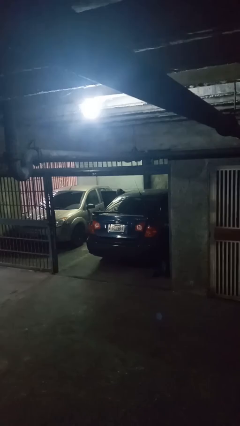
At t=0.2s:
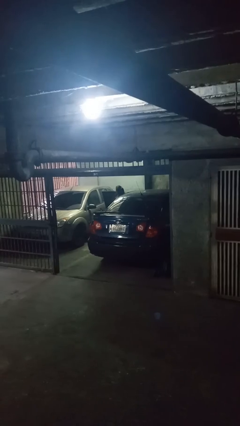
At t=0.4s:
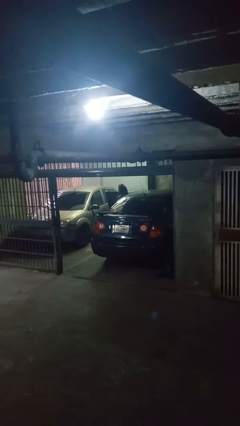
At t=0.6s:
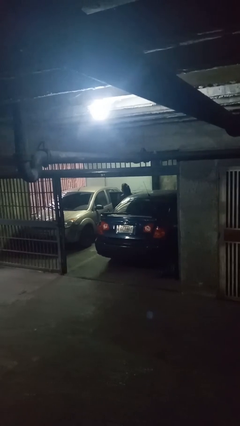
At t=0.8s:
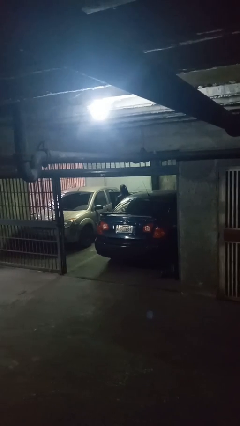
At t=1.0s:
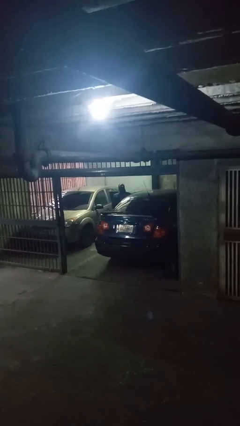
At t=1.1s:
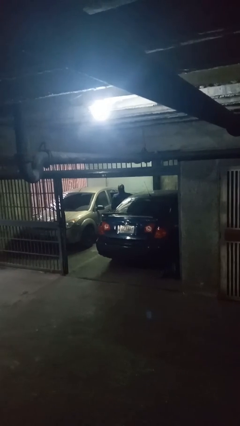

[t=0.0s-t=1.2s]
person exits car

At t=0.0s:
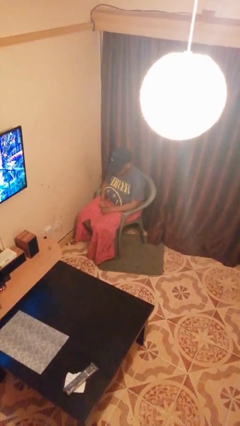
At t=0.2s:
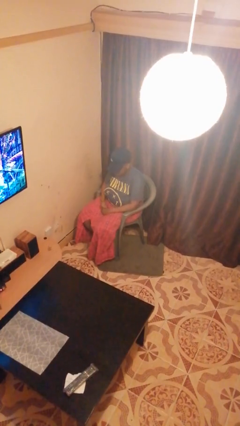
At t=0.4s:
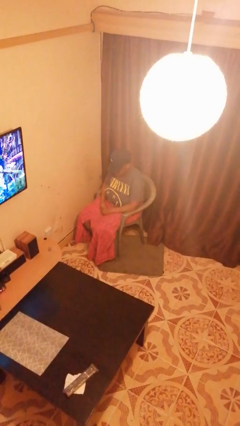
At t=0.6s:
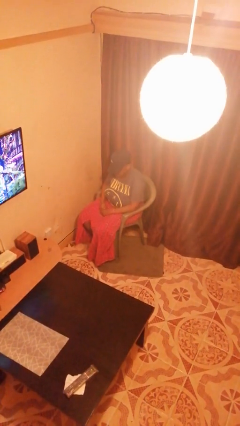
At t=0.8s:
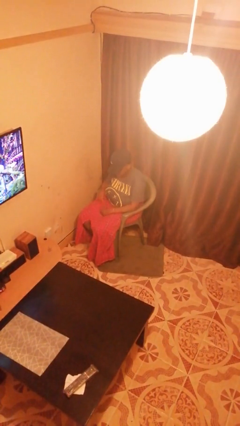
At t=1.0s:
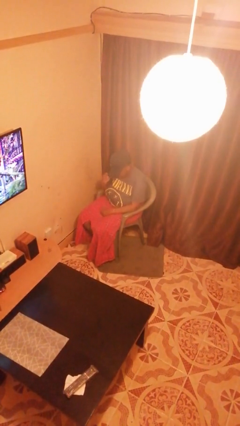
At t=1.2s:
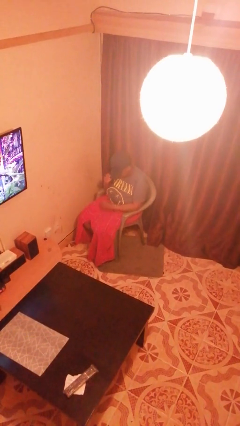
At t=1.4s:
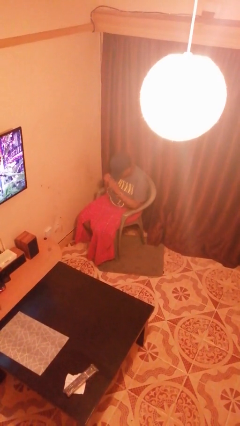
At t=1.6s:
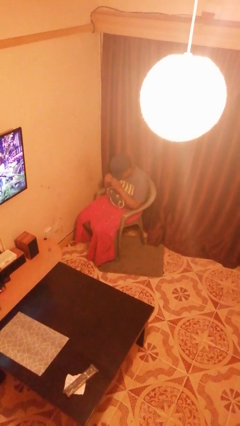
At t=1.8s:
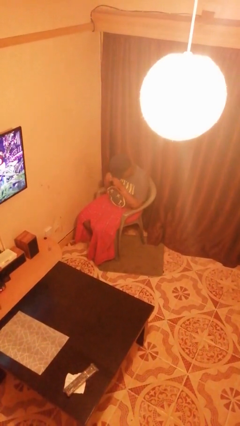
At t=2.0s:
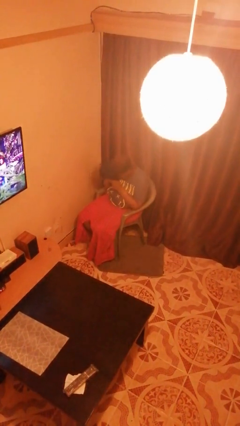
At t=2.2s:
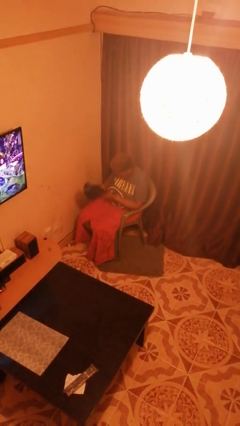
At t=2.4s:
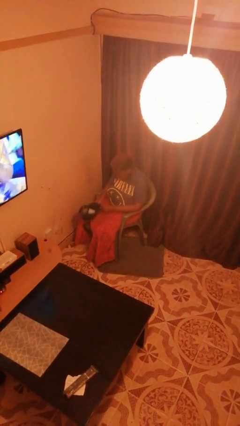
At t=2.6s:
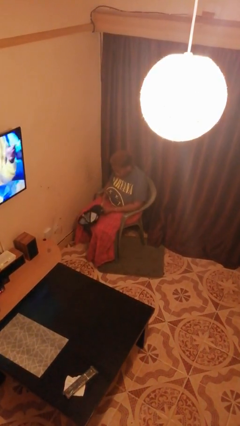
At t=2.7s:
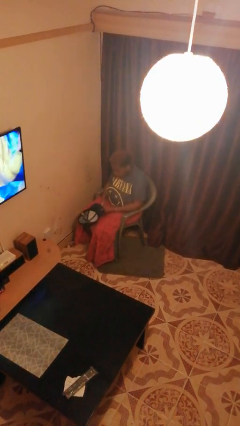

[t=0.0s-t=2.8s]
person takes off hat

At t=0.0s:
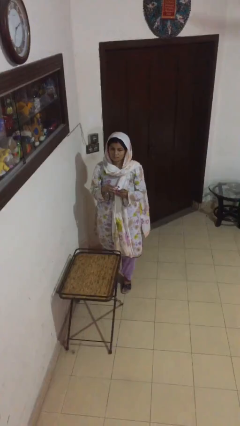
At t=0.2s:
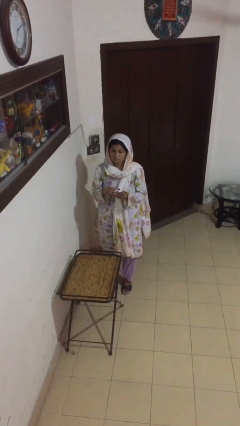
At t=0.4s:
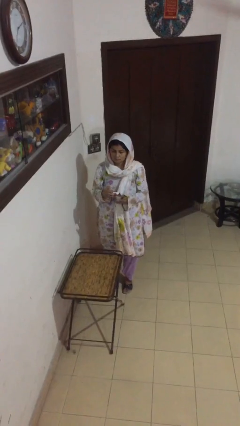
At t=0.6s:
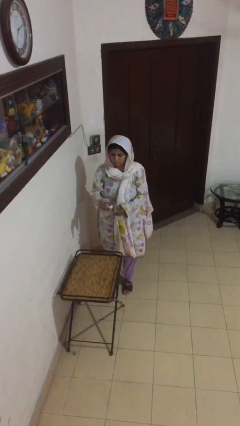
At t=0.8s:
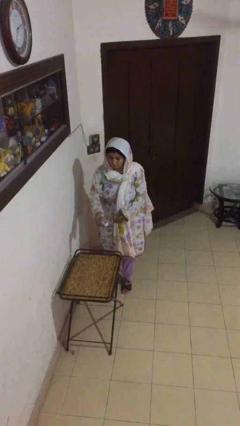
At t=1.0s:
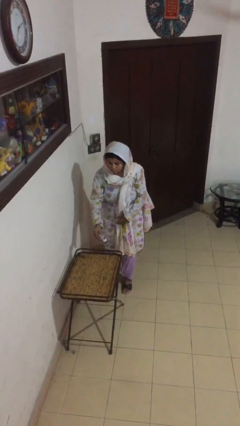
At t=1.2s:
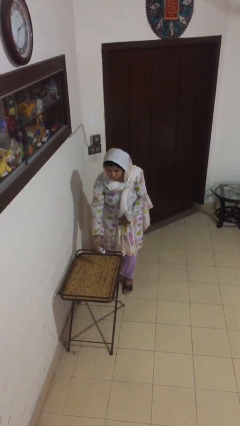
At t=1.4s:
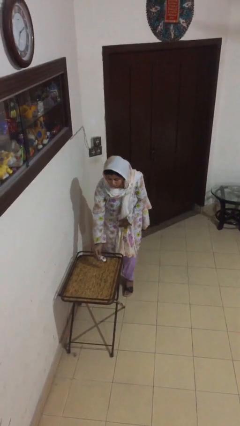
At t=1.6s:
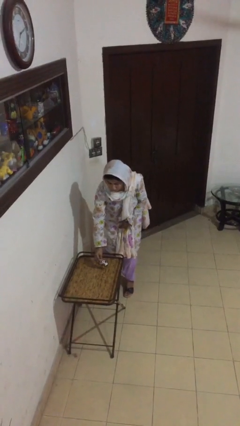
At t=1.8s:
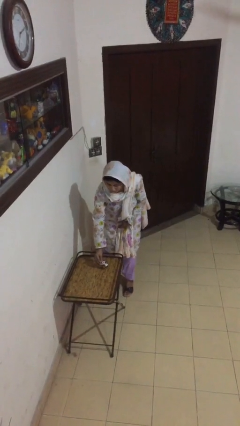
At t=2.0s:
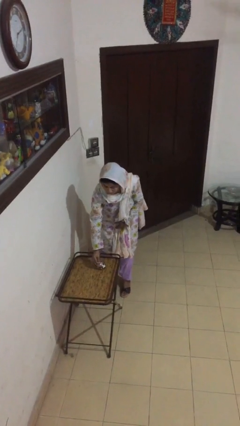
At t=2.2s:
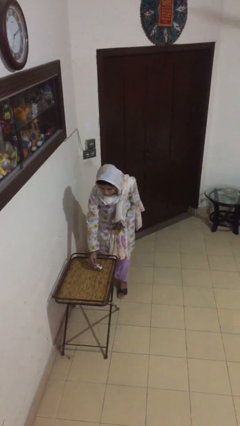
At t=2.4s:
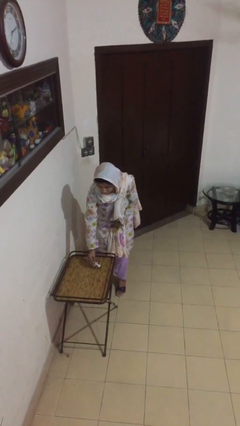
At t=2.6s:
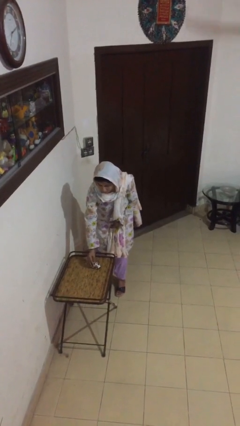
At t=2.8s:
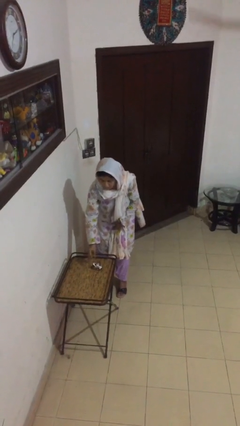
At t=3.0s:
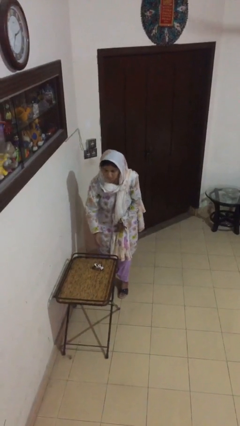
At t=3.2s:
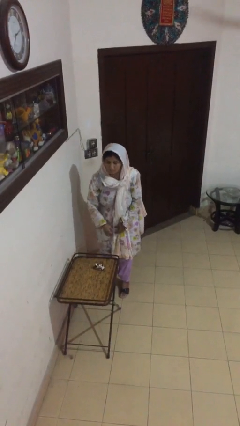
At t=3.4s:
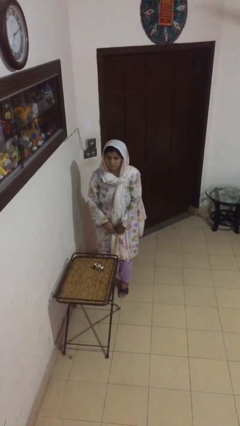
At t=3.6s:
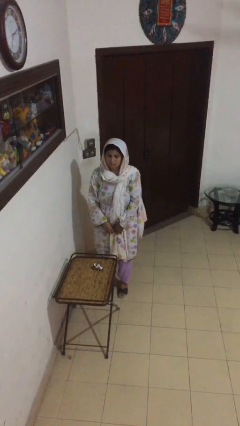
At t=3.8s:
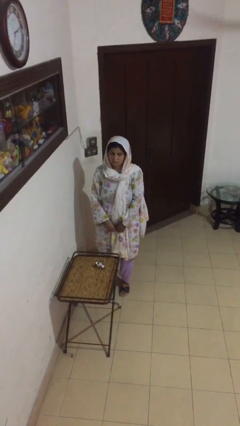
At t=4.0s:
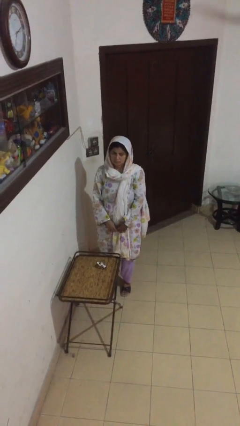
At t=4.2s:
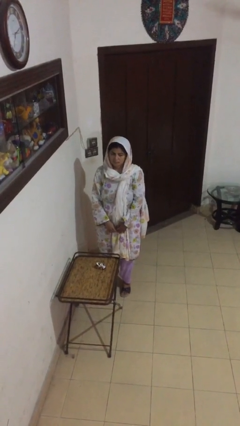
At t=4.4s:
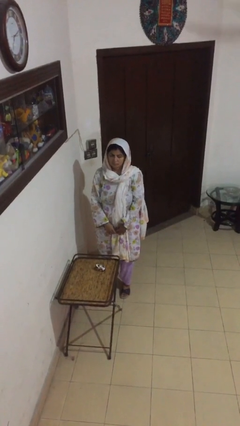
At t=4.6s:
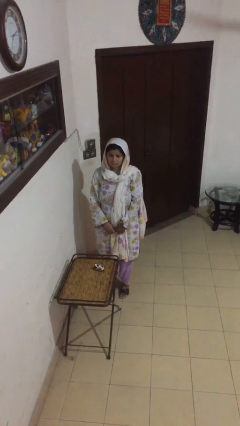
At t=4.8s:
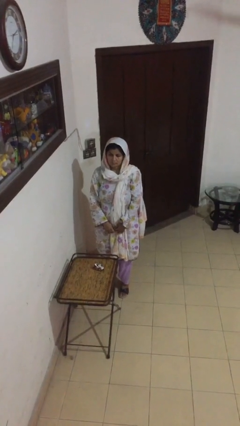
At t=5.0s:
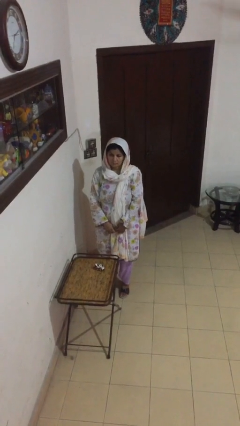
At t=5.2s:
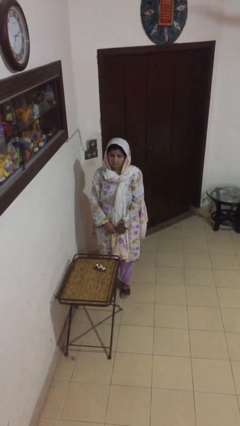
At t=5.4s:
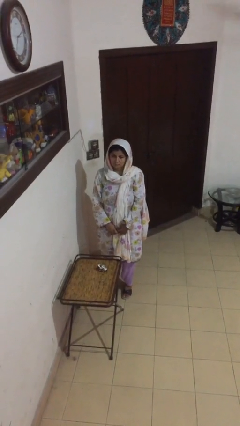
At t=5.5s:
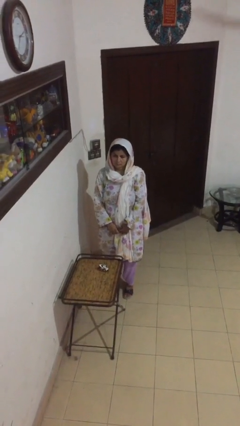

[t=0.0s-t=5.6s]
person puts down object on table

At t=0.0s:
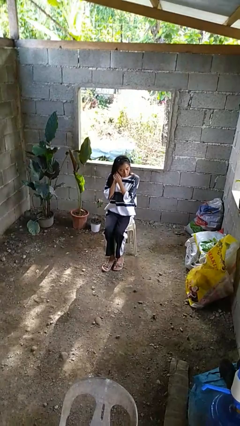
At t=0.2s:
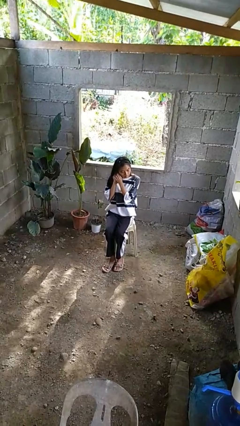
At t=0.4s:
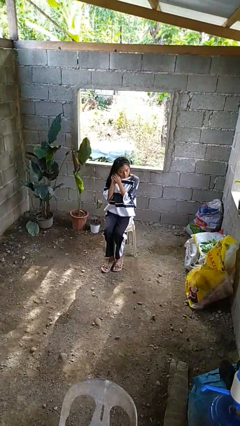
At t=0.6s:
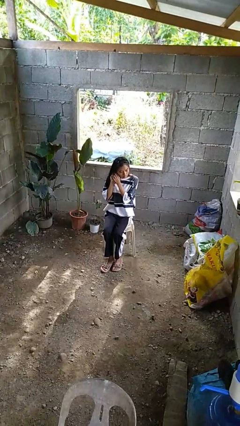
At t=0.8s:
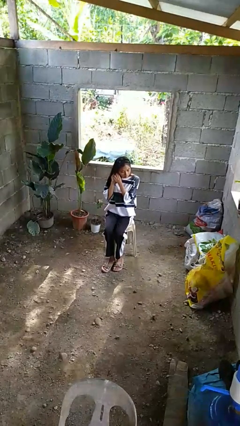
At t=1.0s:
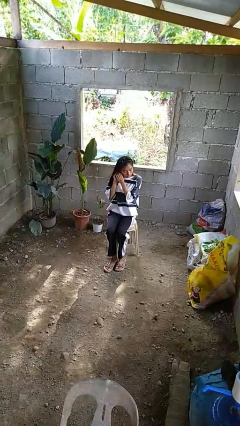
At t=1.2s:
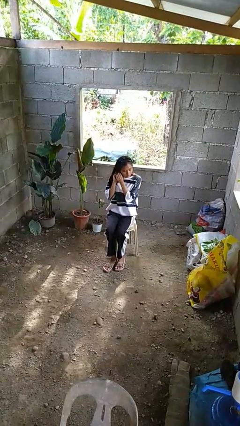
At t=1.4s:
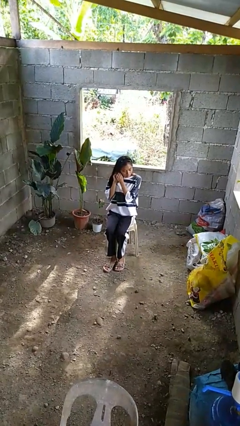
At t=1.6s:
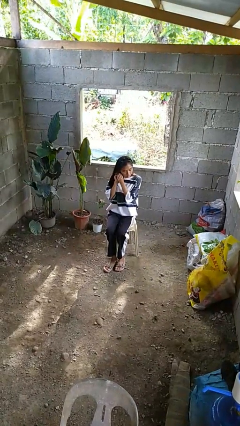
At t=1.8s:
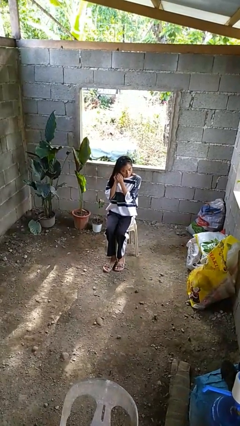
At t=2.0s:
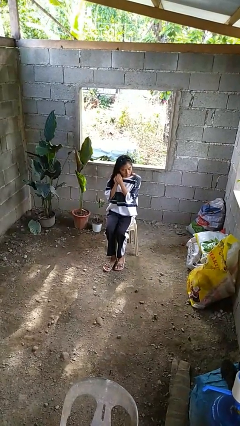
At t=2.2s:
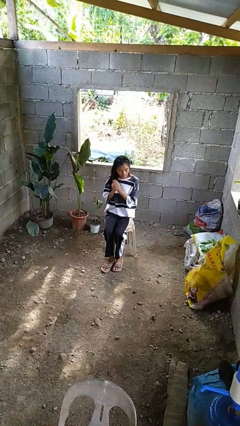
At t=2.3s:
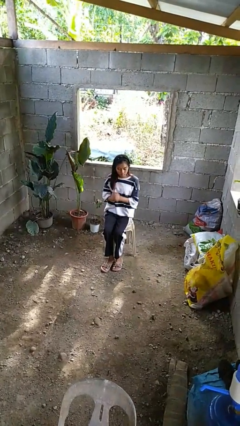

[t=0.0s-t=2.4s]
person puts on earrings

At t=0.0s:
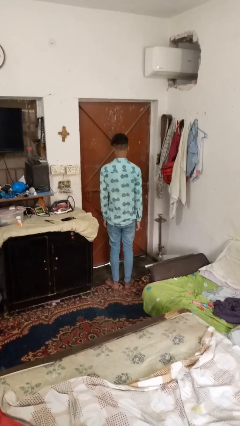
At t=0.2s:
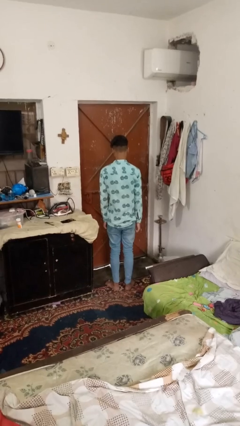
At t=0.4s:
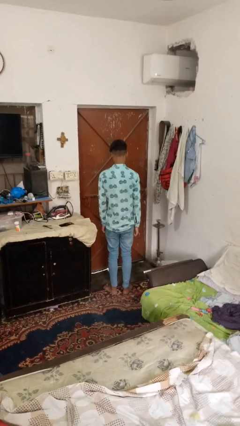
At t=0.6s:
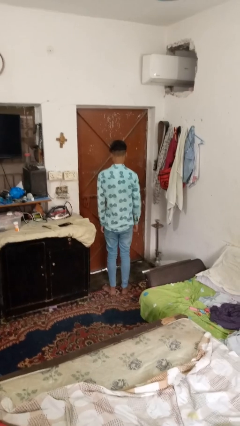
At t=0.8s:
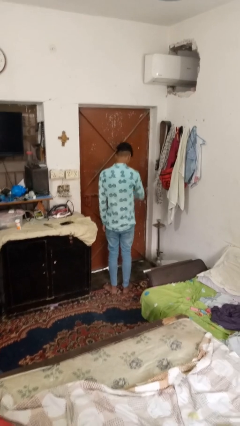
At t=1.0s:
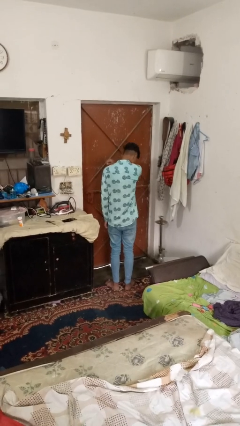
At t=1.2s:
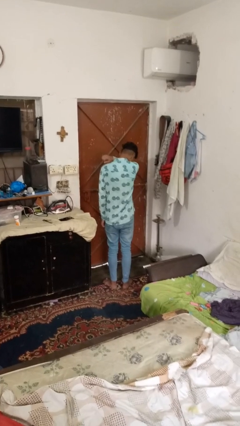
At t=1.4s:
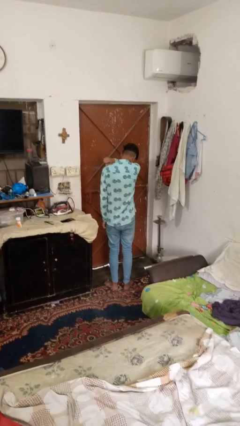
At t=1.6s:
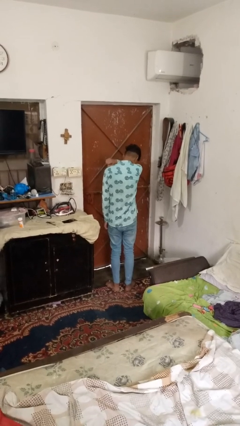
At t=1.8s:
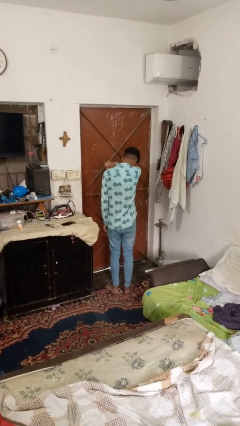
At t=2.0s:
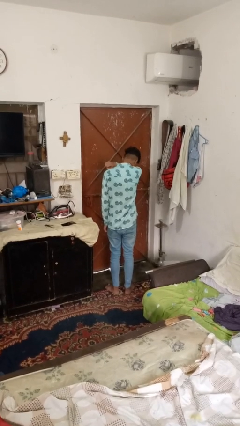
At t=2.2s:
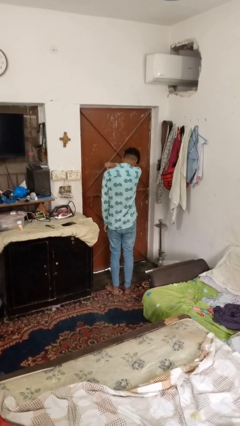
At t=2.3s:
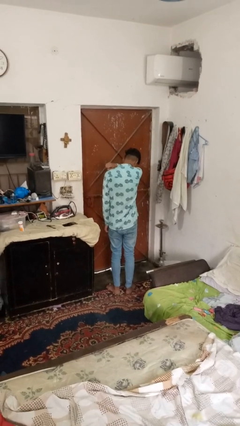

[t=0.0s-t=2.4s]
person sneezes into arm

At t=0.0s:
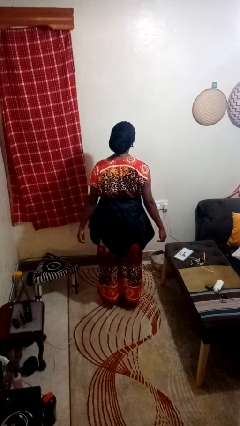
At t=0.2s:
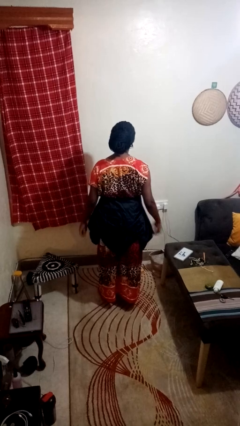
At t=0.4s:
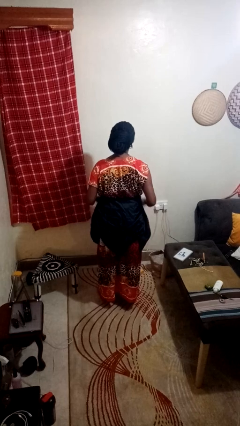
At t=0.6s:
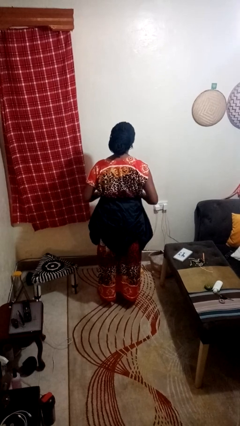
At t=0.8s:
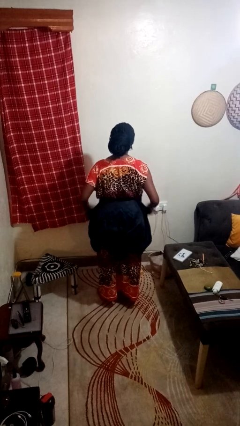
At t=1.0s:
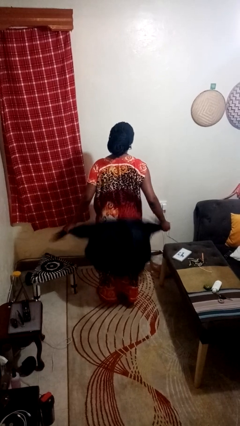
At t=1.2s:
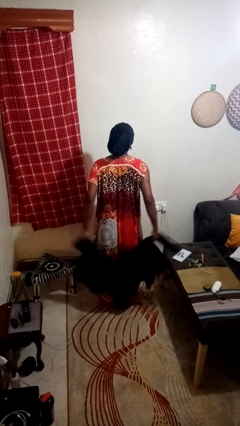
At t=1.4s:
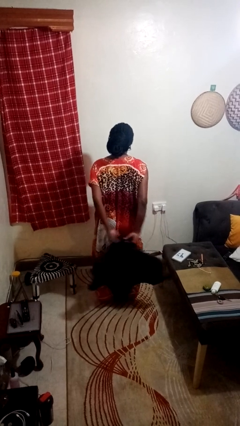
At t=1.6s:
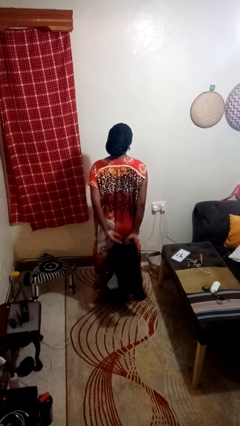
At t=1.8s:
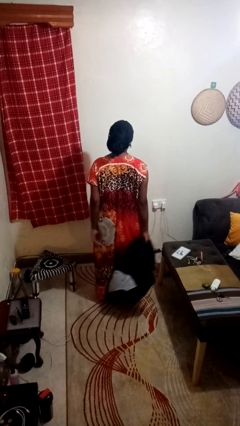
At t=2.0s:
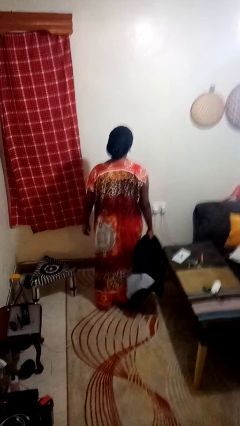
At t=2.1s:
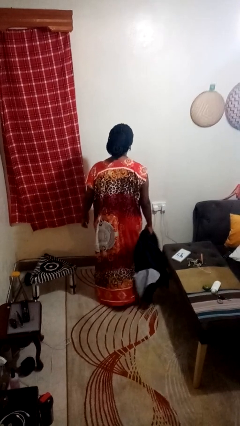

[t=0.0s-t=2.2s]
person unties jacket around waist

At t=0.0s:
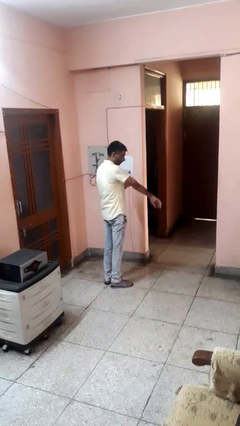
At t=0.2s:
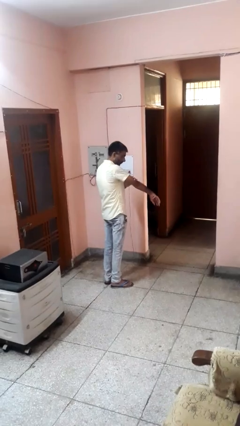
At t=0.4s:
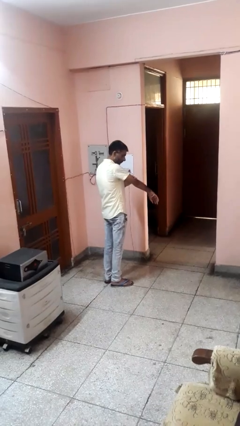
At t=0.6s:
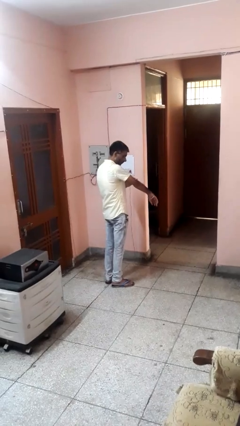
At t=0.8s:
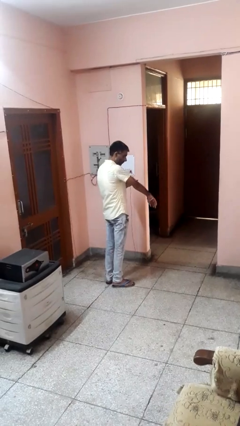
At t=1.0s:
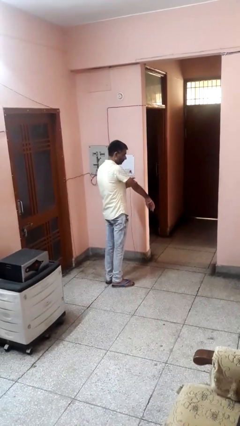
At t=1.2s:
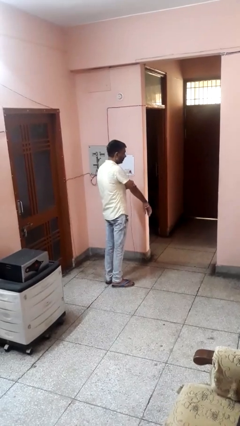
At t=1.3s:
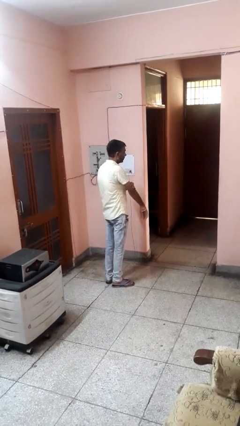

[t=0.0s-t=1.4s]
person swats bug
